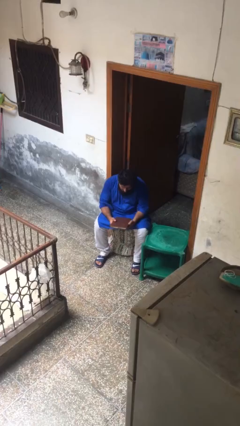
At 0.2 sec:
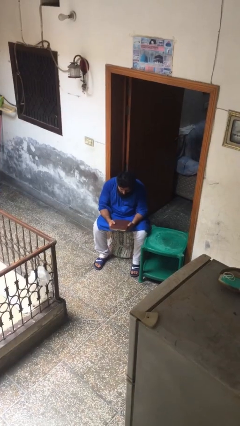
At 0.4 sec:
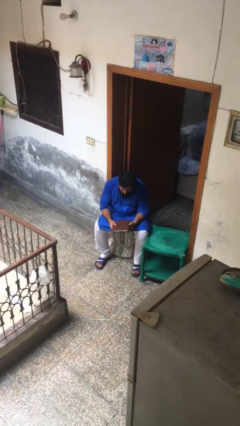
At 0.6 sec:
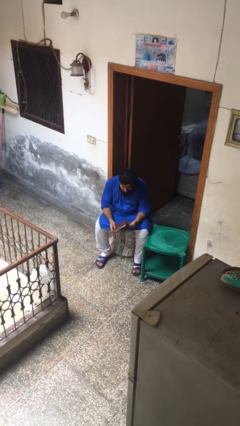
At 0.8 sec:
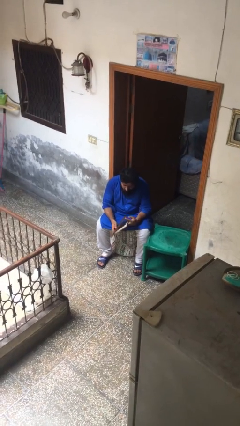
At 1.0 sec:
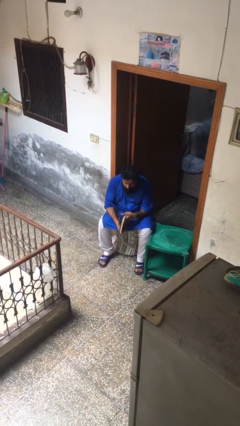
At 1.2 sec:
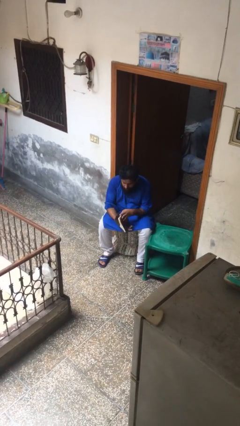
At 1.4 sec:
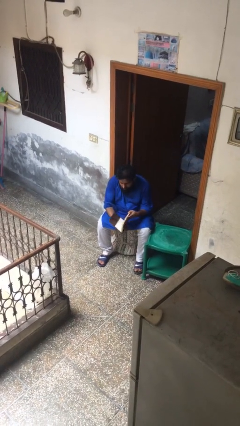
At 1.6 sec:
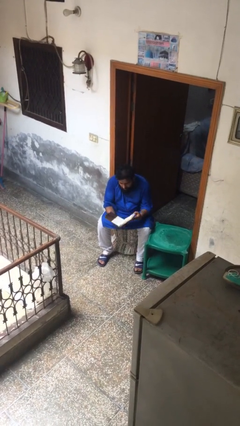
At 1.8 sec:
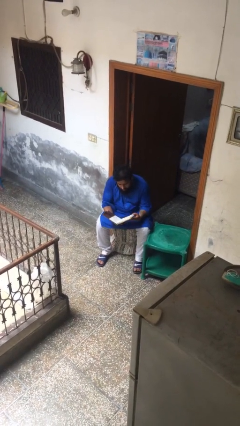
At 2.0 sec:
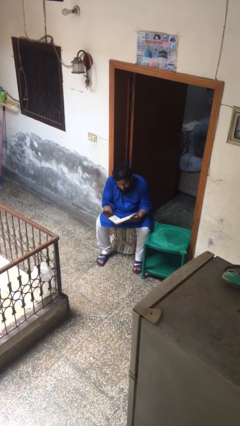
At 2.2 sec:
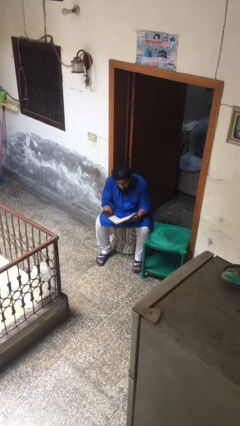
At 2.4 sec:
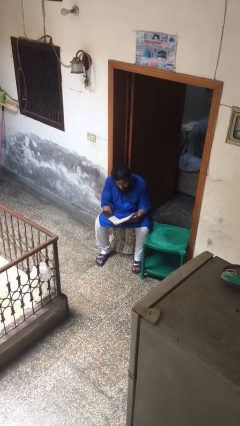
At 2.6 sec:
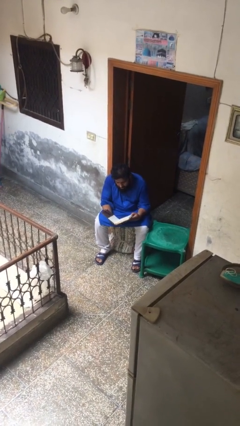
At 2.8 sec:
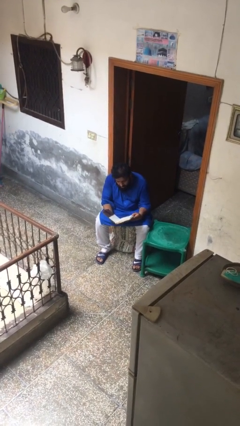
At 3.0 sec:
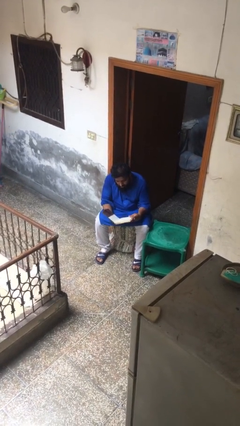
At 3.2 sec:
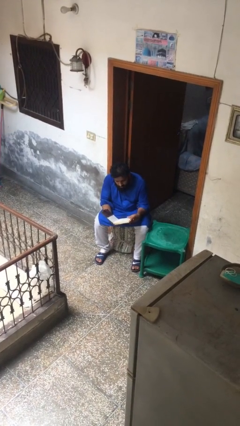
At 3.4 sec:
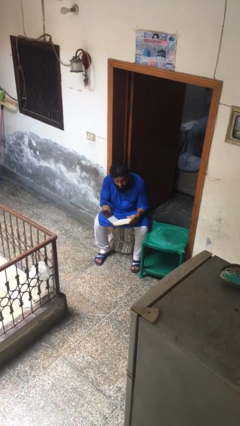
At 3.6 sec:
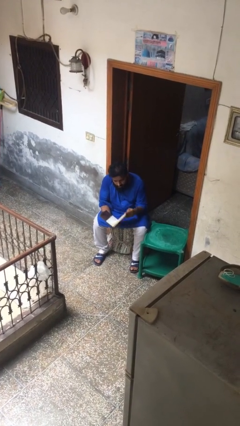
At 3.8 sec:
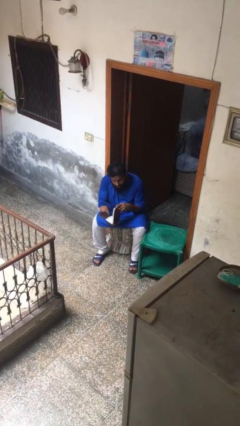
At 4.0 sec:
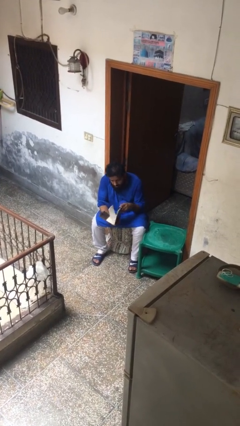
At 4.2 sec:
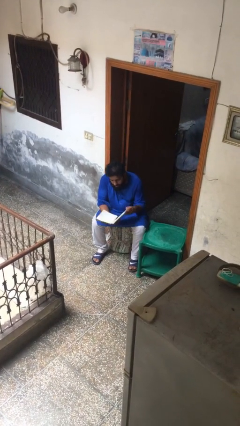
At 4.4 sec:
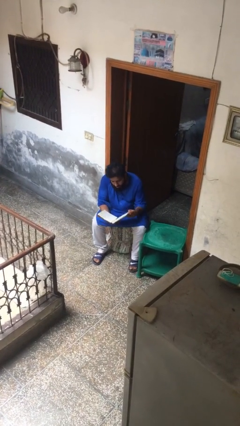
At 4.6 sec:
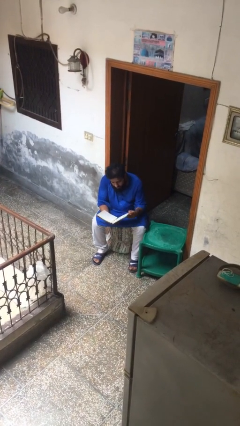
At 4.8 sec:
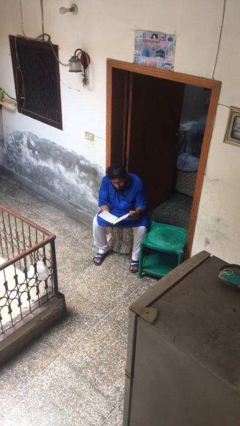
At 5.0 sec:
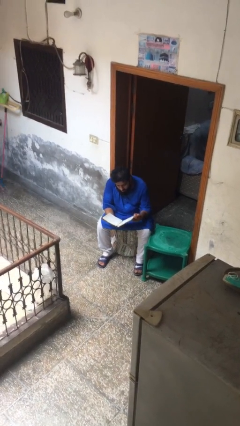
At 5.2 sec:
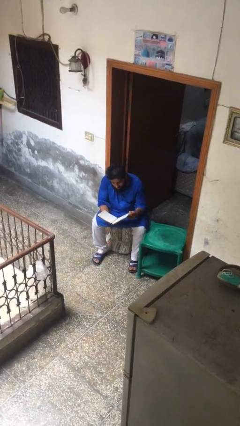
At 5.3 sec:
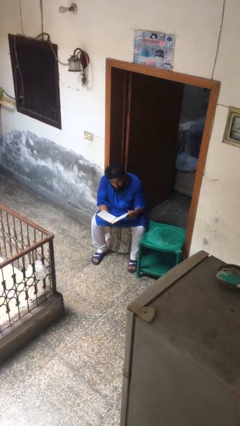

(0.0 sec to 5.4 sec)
person reads document

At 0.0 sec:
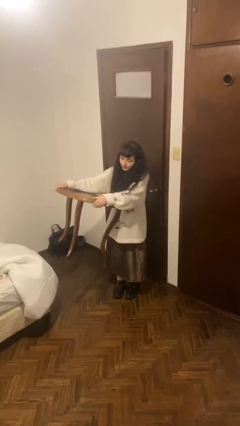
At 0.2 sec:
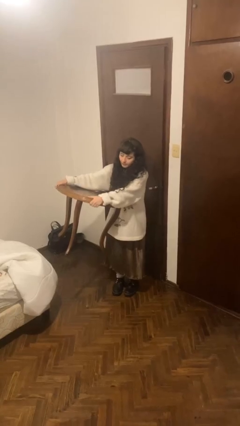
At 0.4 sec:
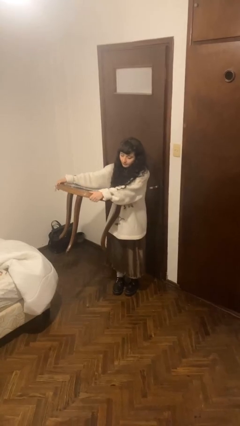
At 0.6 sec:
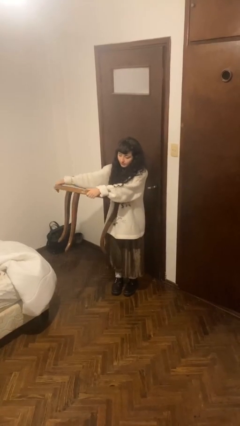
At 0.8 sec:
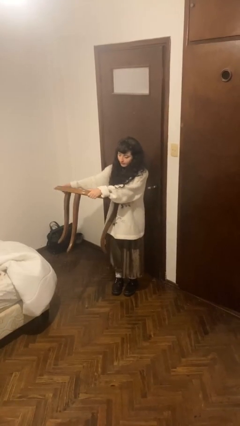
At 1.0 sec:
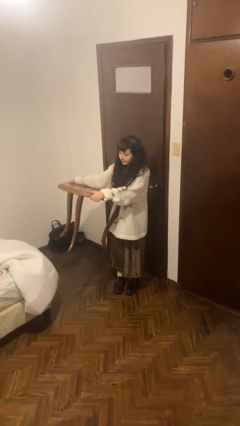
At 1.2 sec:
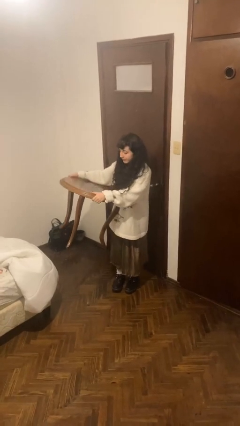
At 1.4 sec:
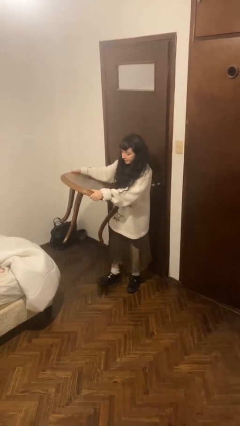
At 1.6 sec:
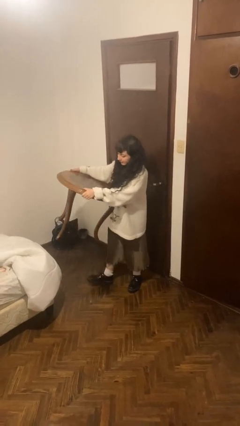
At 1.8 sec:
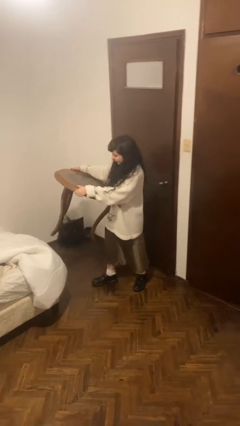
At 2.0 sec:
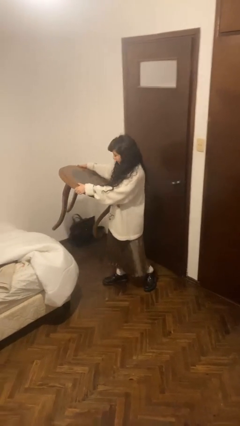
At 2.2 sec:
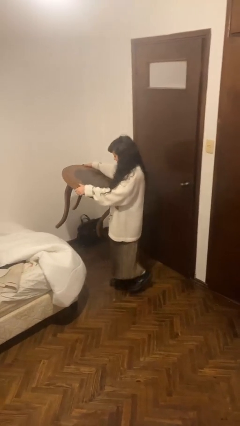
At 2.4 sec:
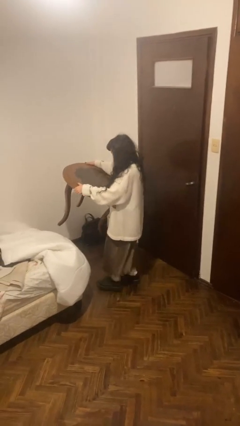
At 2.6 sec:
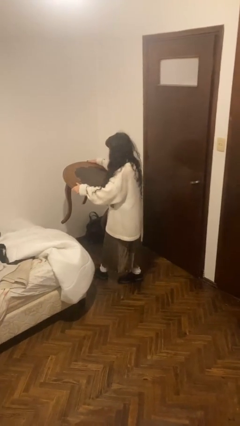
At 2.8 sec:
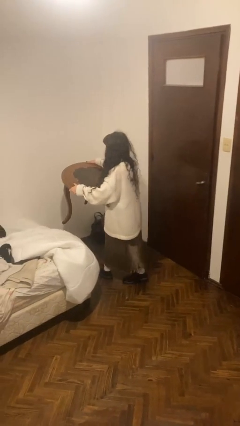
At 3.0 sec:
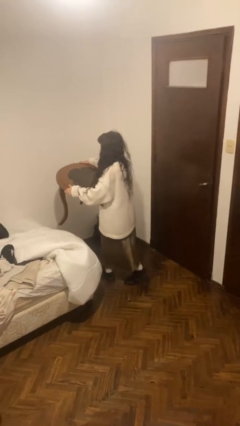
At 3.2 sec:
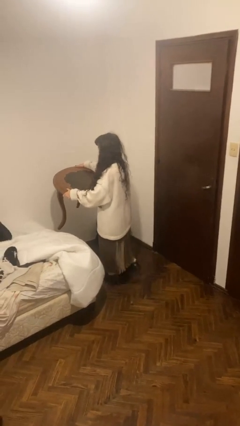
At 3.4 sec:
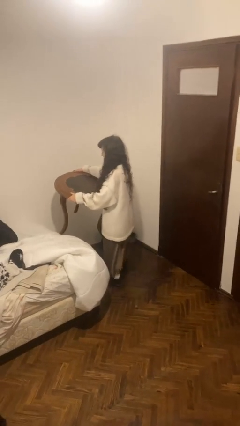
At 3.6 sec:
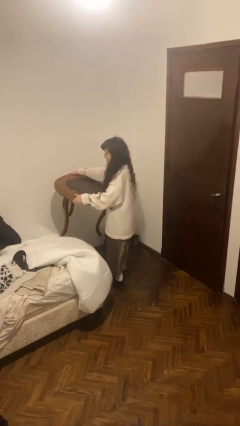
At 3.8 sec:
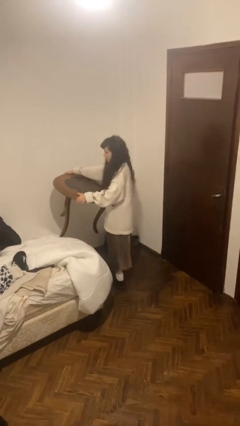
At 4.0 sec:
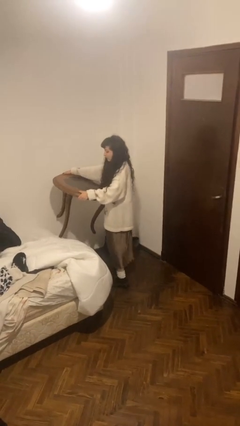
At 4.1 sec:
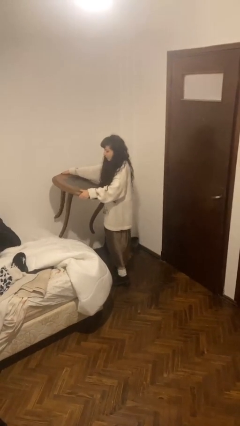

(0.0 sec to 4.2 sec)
person carries furniture

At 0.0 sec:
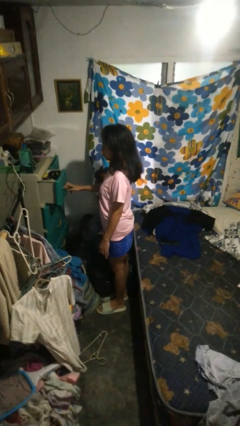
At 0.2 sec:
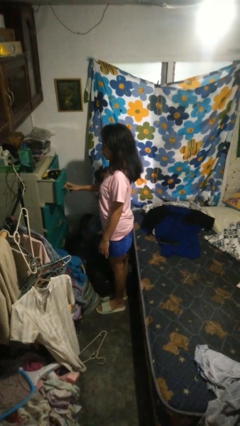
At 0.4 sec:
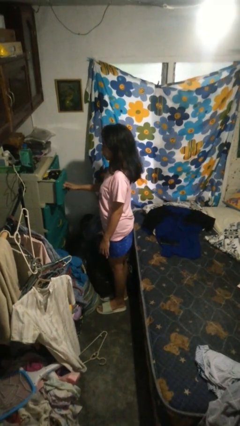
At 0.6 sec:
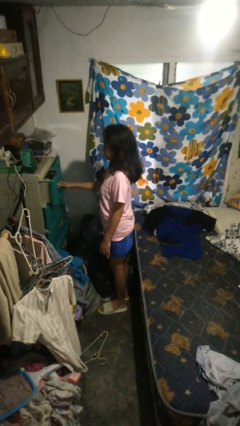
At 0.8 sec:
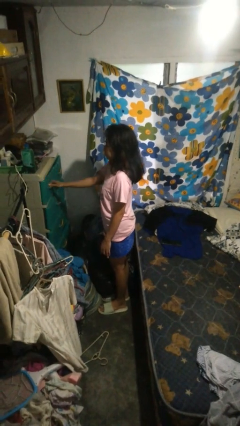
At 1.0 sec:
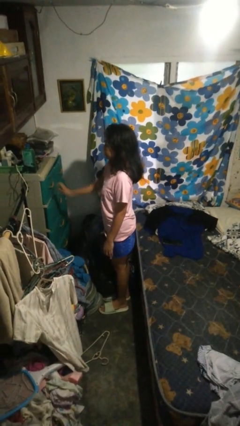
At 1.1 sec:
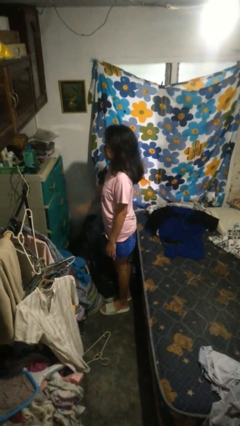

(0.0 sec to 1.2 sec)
person closes dresser drawer

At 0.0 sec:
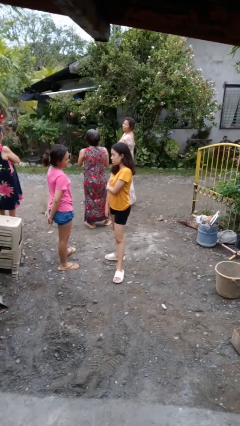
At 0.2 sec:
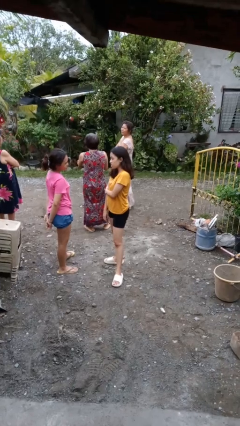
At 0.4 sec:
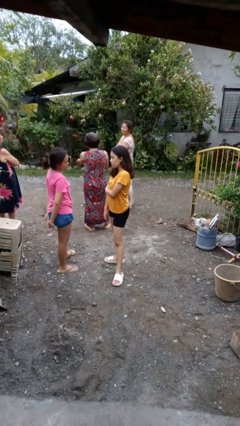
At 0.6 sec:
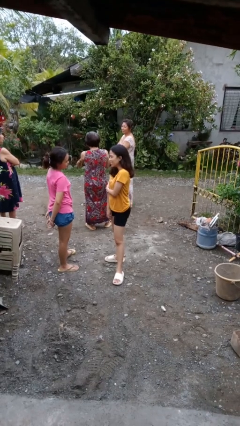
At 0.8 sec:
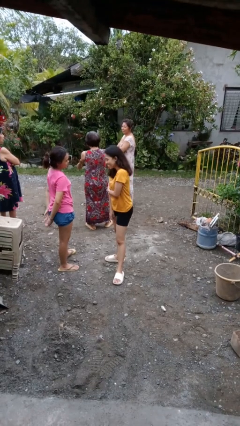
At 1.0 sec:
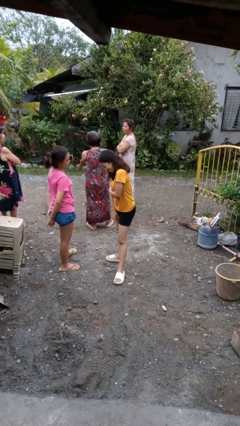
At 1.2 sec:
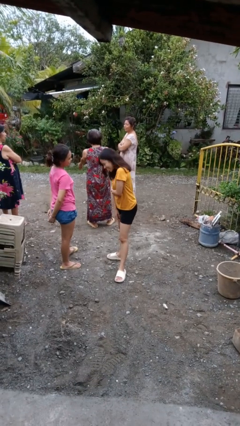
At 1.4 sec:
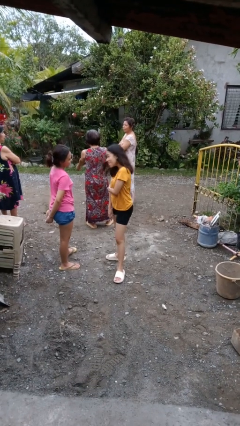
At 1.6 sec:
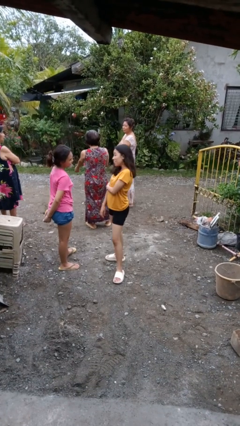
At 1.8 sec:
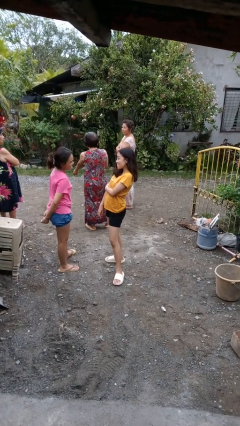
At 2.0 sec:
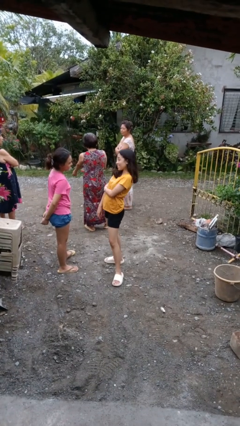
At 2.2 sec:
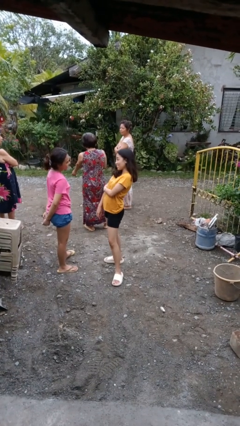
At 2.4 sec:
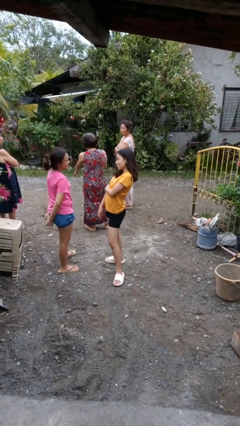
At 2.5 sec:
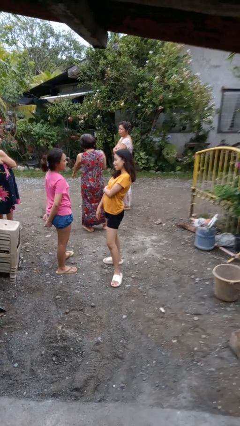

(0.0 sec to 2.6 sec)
person laughs with person

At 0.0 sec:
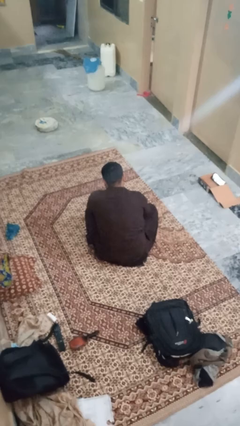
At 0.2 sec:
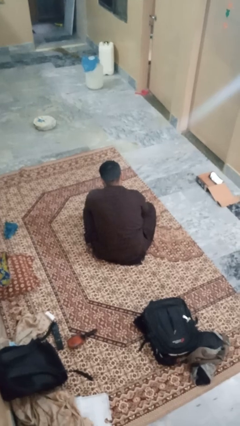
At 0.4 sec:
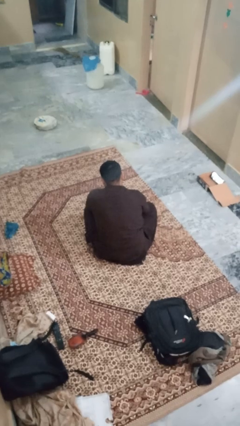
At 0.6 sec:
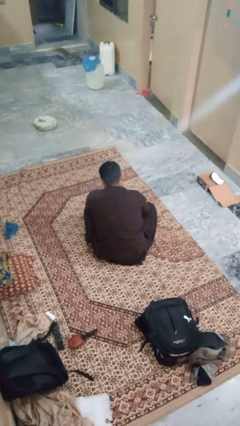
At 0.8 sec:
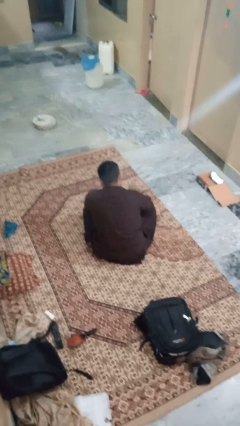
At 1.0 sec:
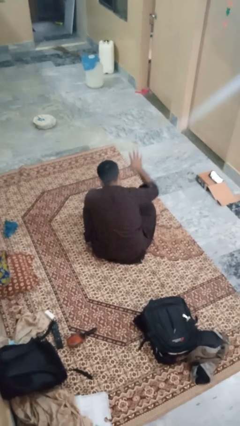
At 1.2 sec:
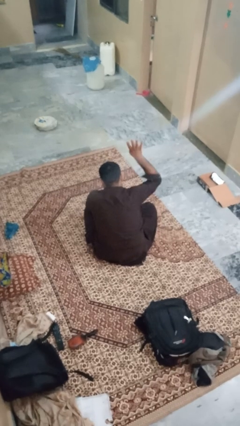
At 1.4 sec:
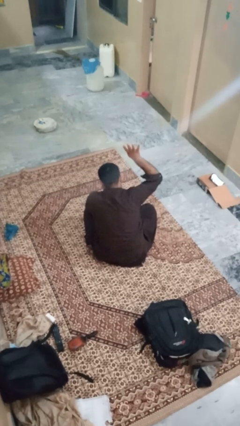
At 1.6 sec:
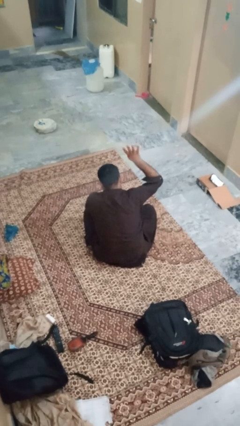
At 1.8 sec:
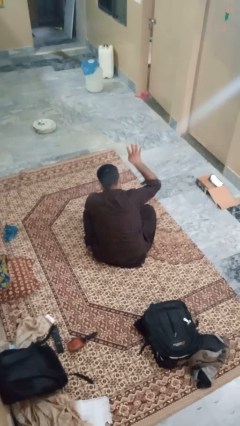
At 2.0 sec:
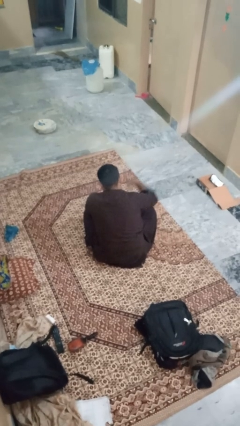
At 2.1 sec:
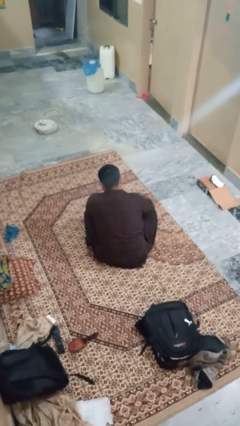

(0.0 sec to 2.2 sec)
person gestures number four

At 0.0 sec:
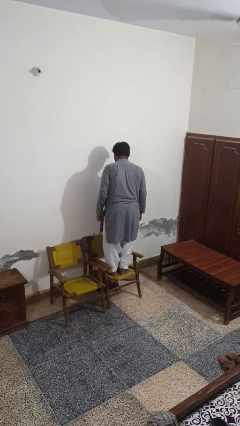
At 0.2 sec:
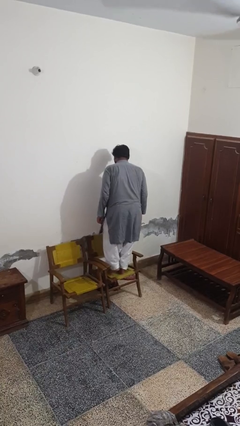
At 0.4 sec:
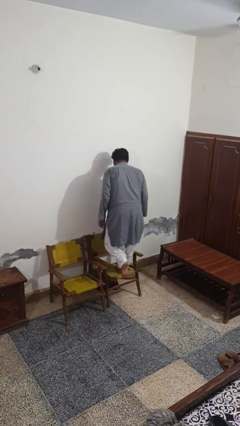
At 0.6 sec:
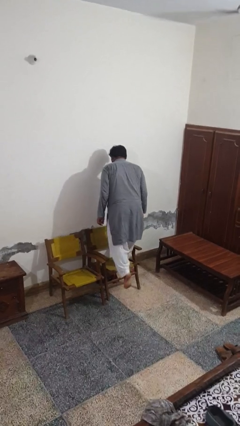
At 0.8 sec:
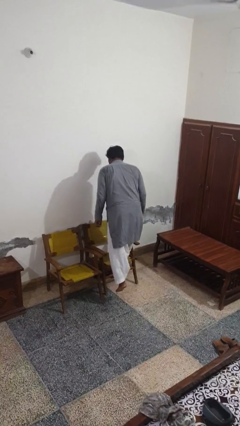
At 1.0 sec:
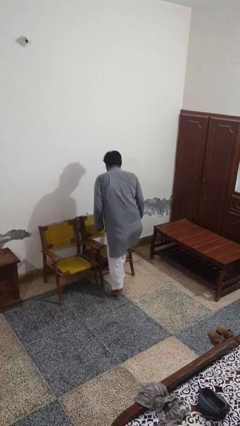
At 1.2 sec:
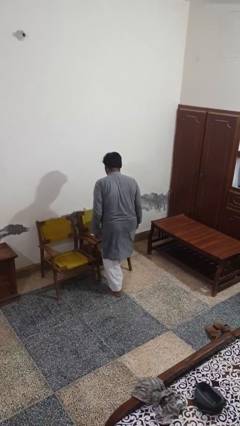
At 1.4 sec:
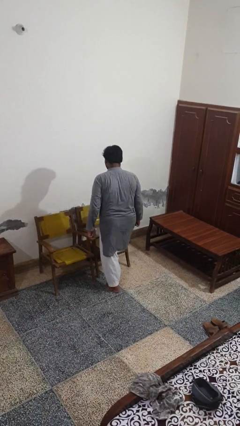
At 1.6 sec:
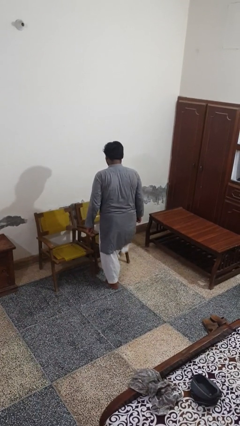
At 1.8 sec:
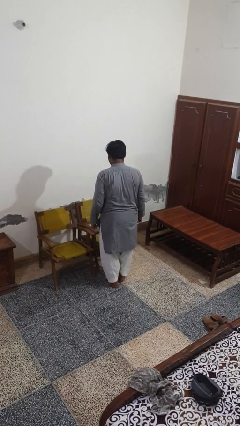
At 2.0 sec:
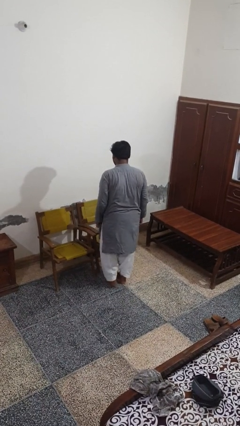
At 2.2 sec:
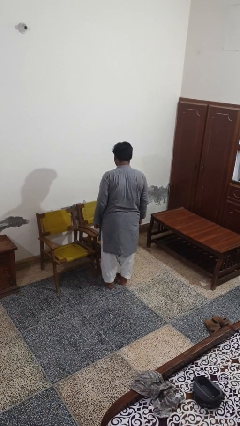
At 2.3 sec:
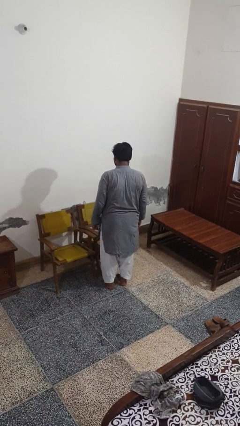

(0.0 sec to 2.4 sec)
person climbs off chair
